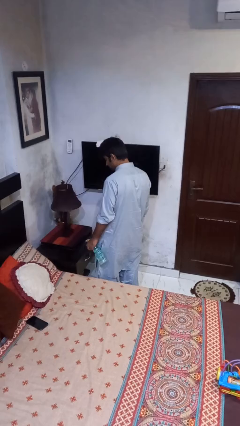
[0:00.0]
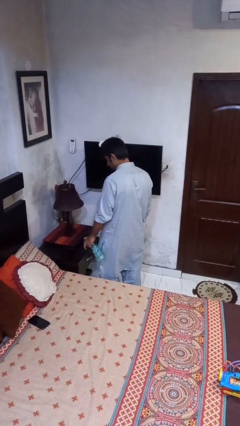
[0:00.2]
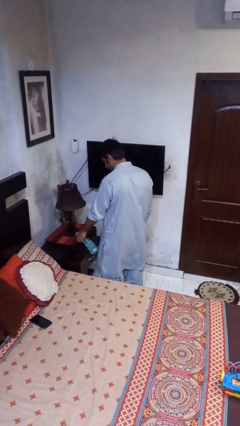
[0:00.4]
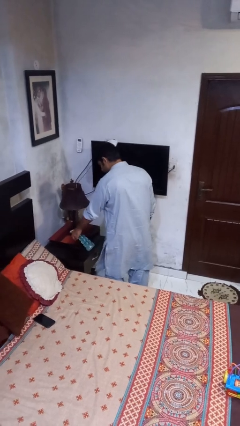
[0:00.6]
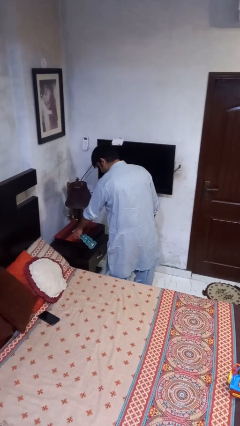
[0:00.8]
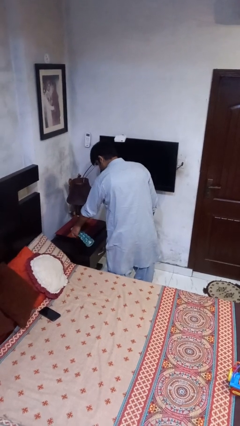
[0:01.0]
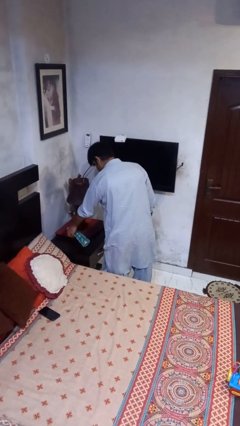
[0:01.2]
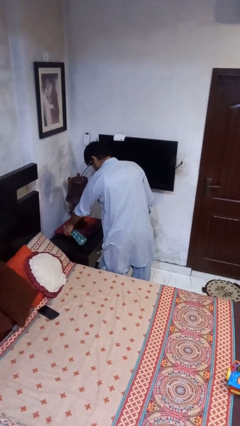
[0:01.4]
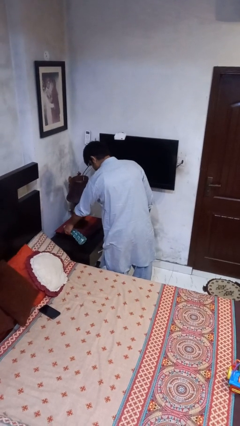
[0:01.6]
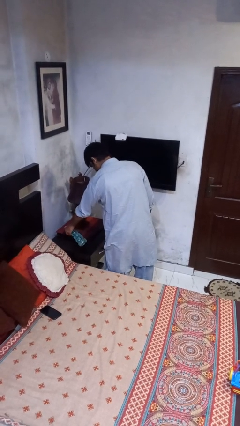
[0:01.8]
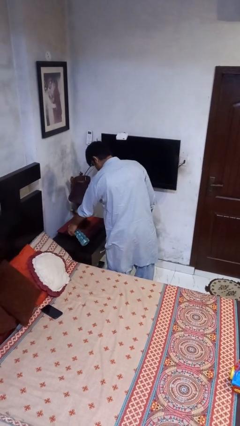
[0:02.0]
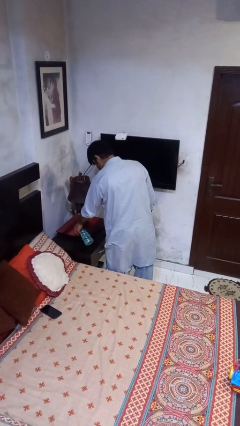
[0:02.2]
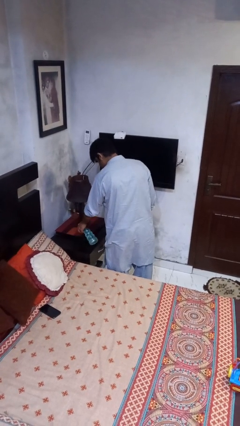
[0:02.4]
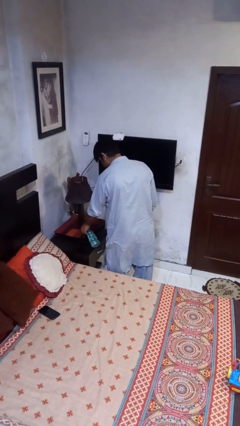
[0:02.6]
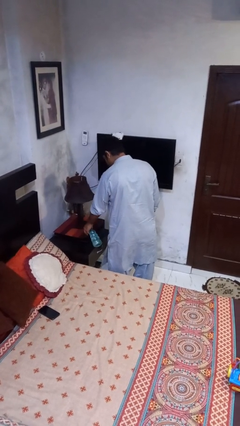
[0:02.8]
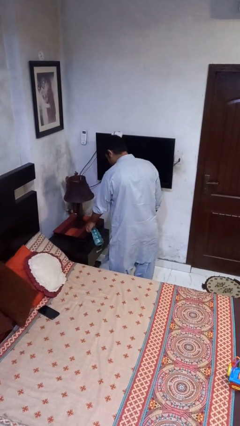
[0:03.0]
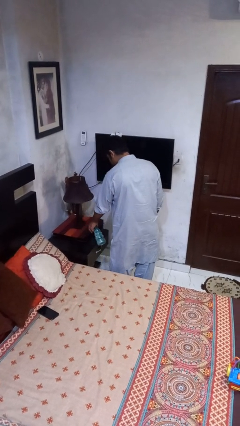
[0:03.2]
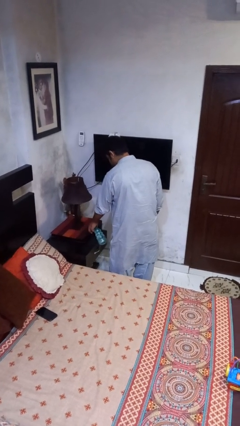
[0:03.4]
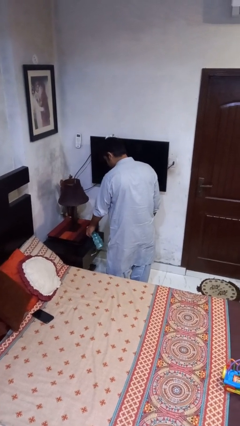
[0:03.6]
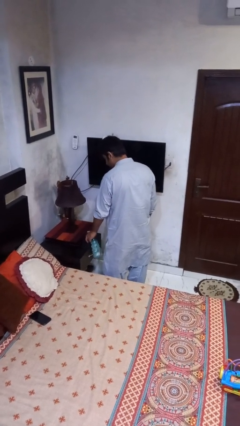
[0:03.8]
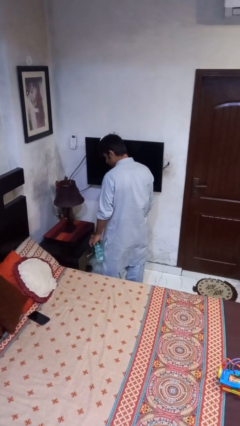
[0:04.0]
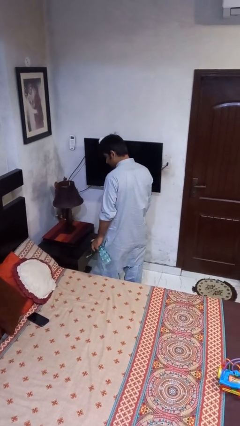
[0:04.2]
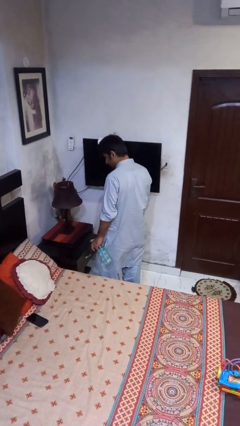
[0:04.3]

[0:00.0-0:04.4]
person sprays from bottle

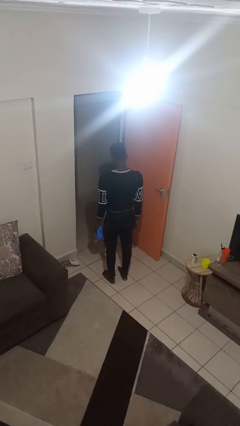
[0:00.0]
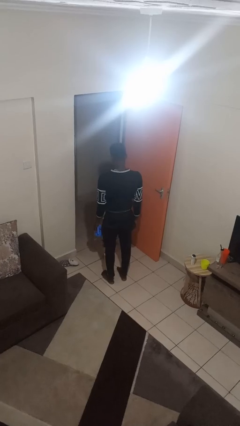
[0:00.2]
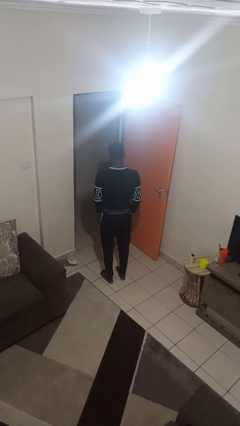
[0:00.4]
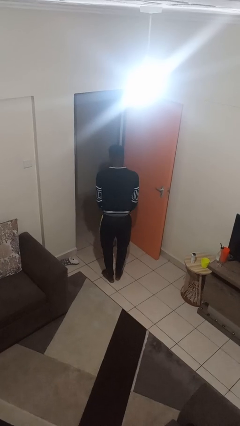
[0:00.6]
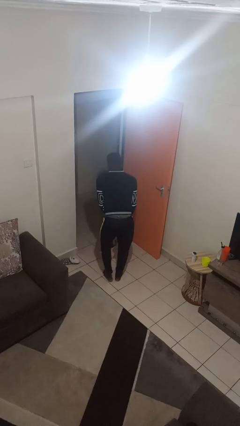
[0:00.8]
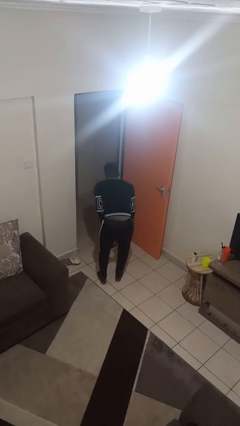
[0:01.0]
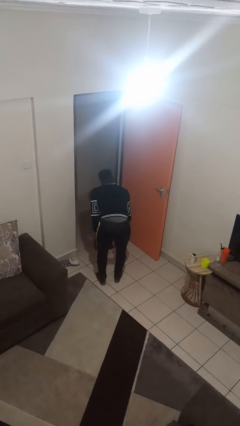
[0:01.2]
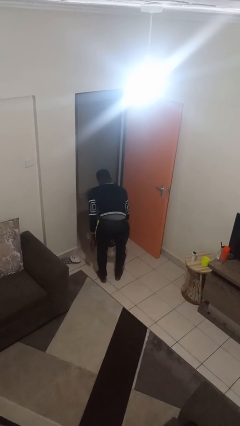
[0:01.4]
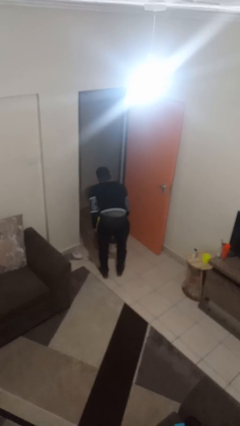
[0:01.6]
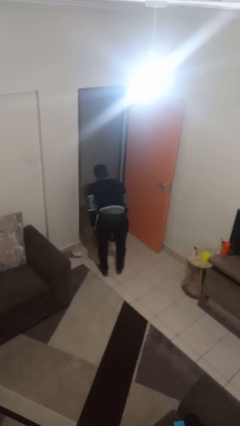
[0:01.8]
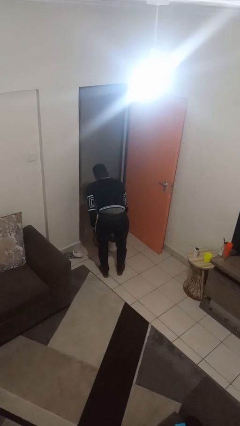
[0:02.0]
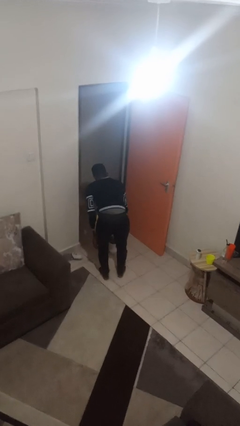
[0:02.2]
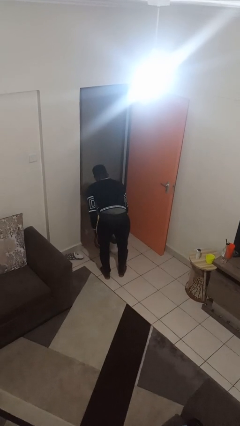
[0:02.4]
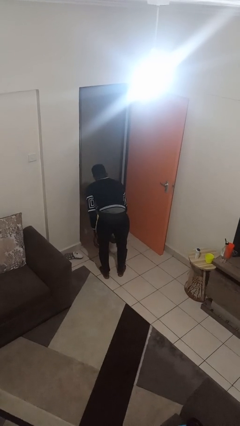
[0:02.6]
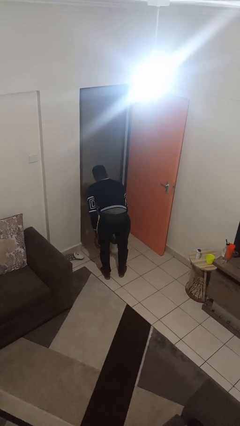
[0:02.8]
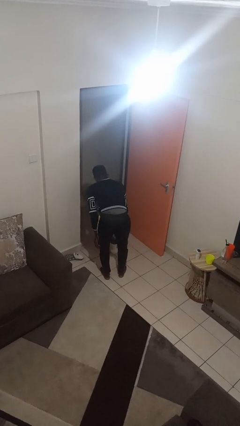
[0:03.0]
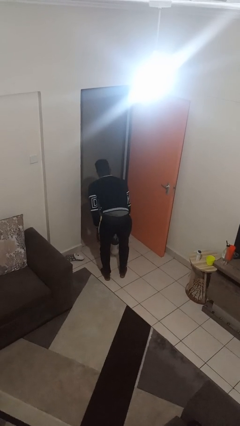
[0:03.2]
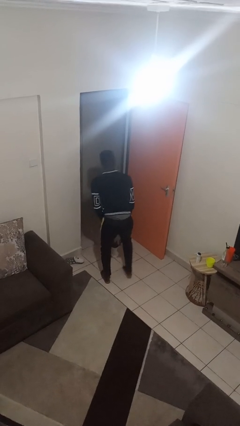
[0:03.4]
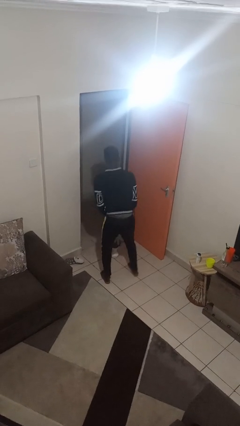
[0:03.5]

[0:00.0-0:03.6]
person waters houseplant

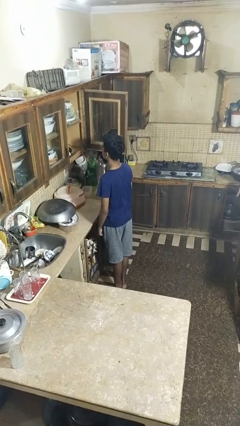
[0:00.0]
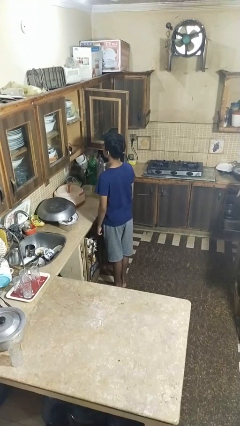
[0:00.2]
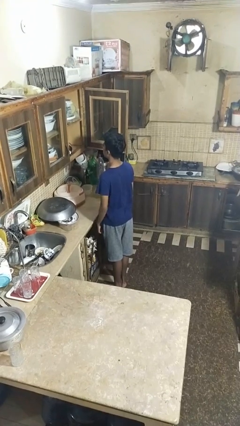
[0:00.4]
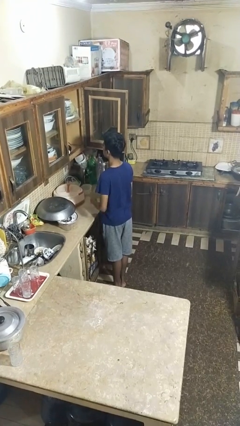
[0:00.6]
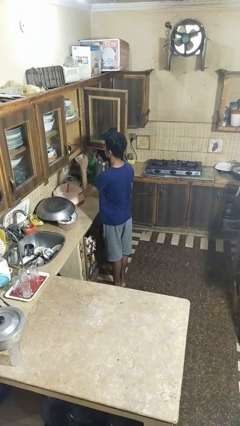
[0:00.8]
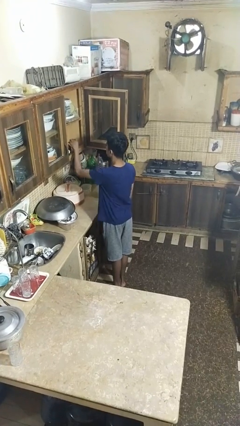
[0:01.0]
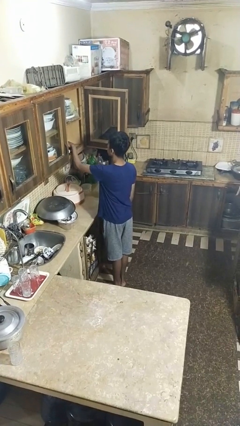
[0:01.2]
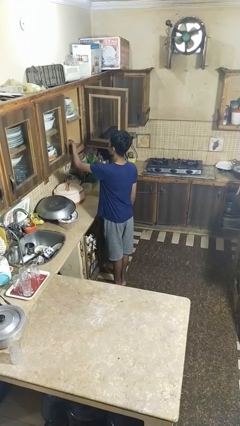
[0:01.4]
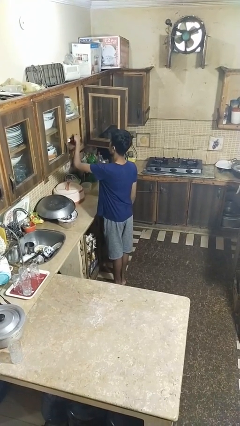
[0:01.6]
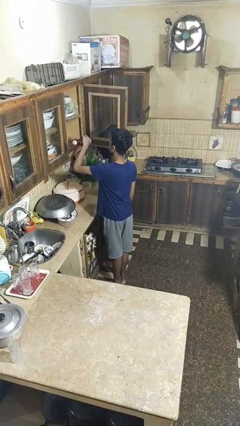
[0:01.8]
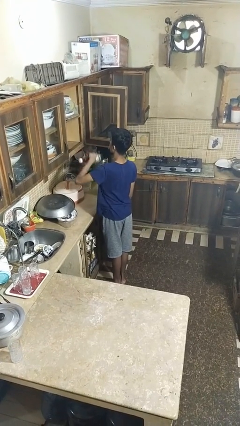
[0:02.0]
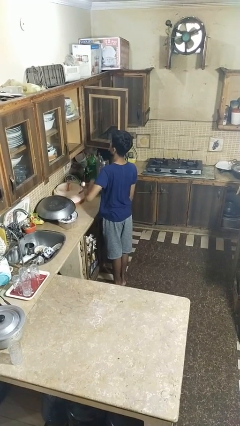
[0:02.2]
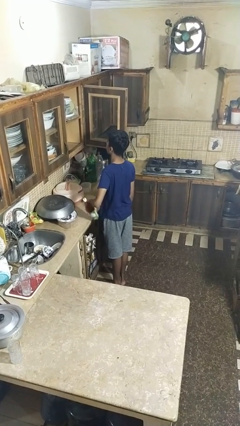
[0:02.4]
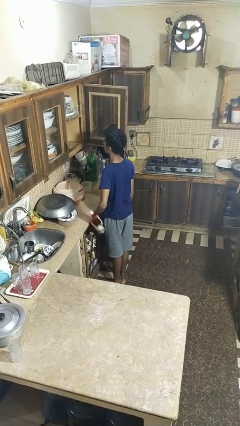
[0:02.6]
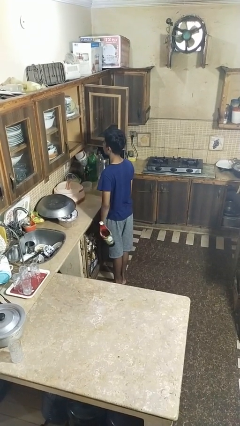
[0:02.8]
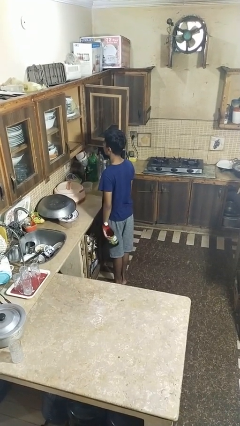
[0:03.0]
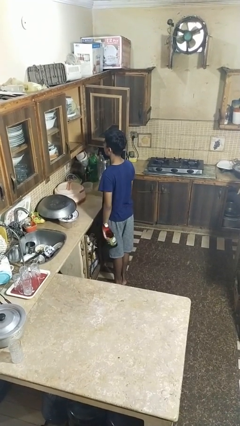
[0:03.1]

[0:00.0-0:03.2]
person takes object from cabinet

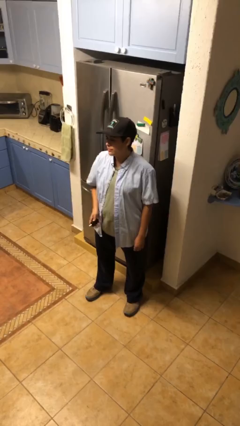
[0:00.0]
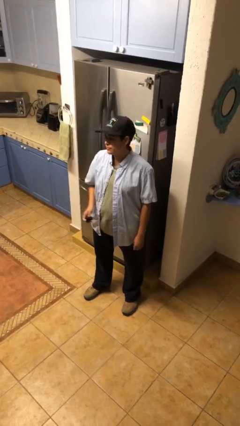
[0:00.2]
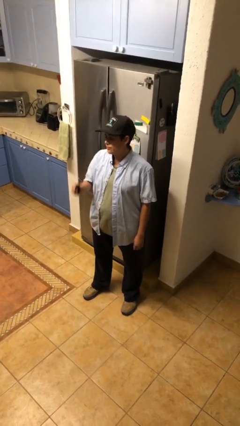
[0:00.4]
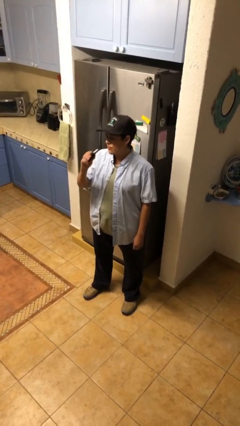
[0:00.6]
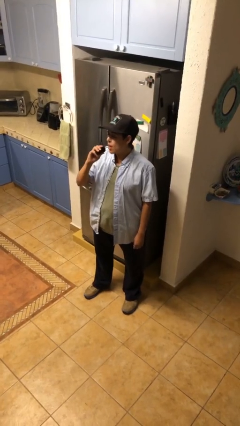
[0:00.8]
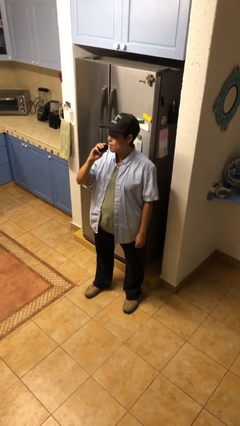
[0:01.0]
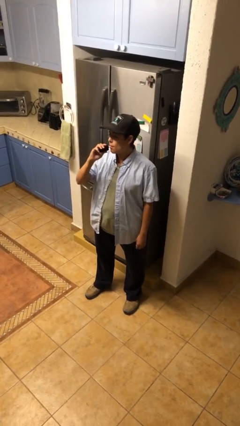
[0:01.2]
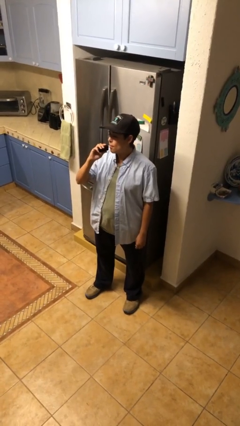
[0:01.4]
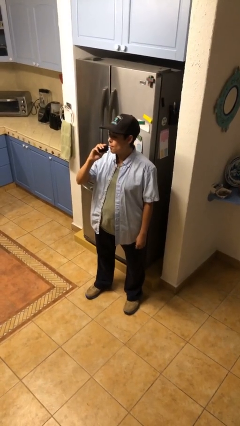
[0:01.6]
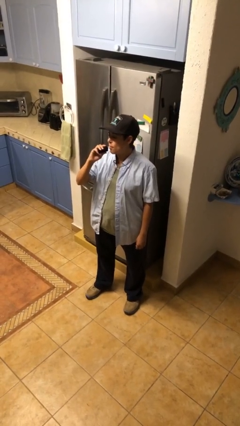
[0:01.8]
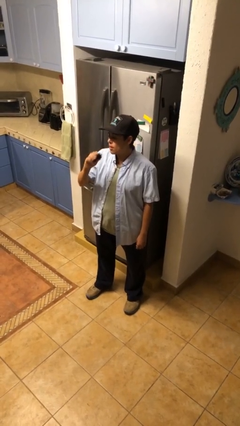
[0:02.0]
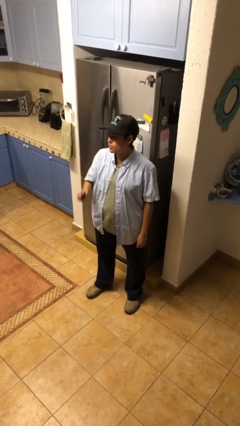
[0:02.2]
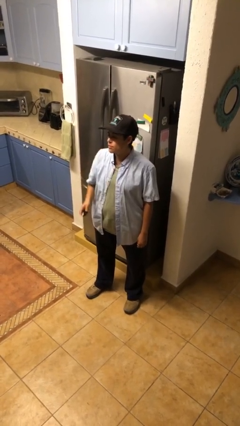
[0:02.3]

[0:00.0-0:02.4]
person vapes

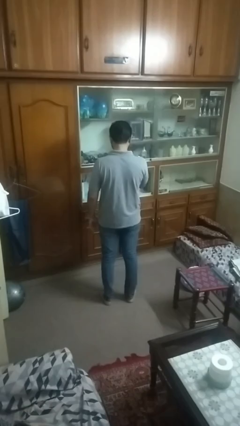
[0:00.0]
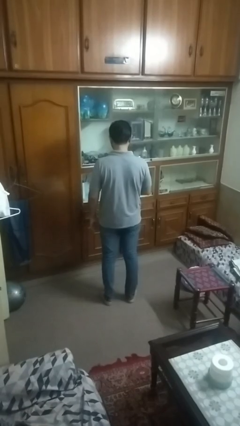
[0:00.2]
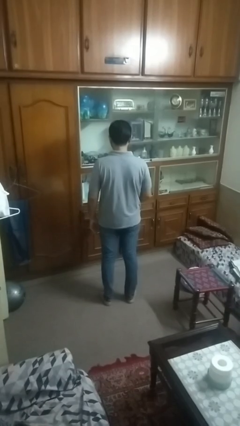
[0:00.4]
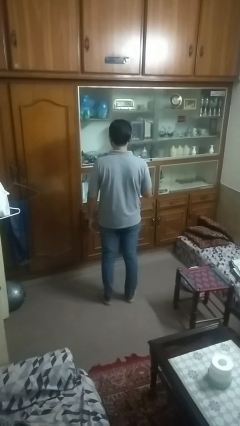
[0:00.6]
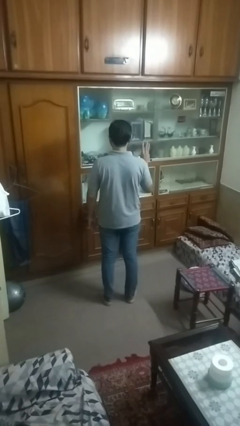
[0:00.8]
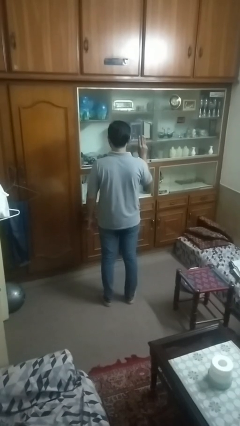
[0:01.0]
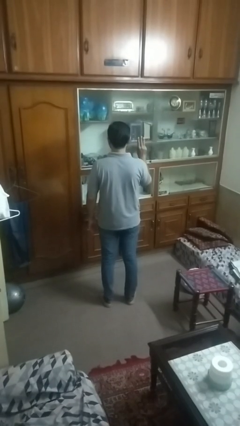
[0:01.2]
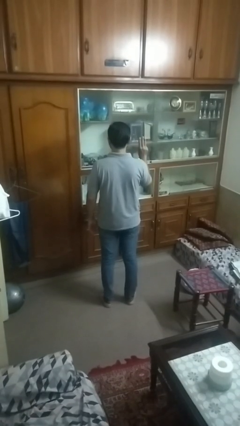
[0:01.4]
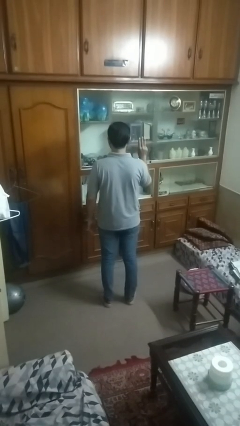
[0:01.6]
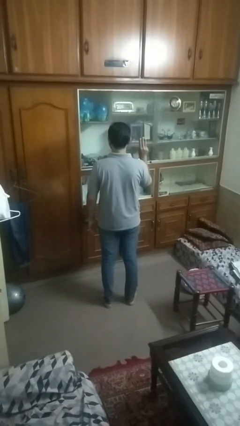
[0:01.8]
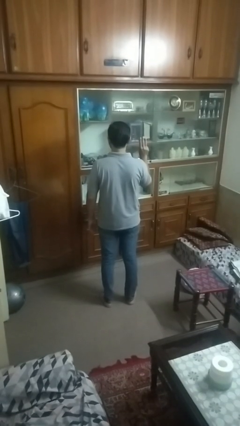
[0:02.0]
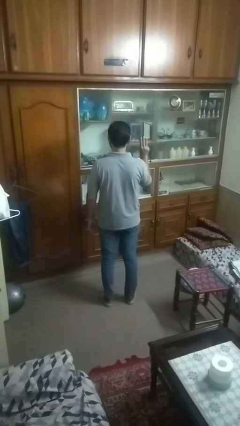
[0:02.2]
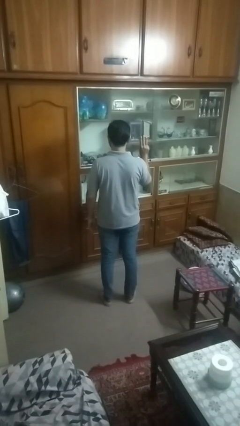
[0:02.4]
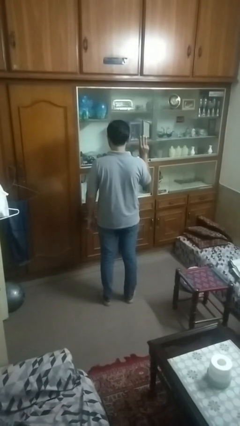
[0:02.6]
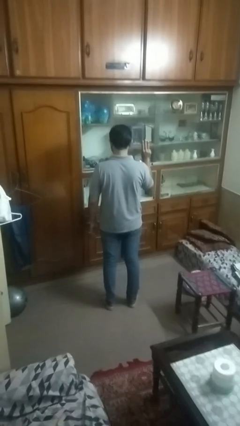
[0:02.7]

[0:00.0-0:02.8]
person gestures number three

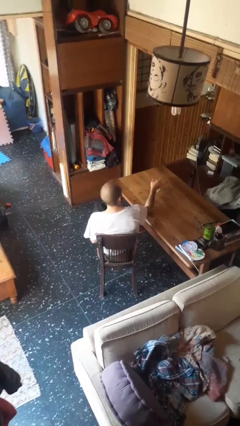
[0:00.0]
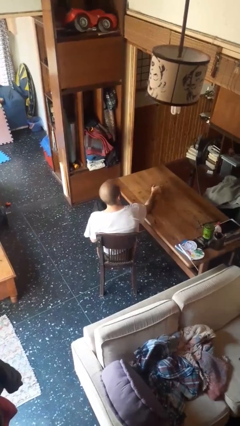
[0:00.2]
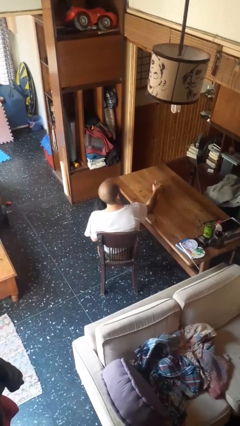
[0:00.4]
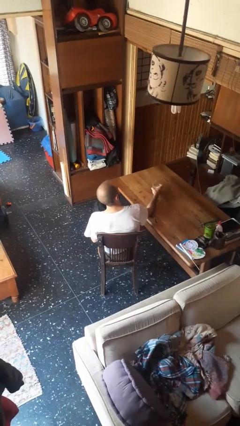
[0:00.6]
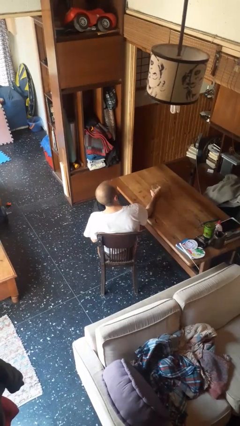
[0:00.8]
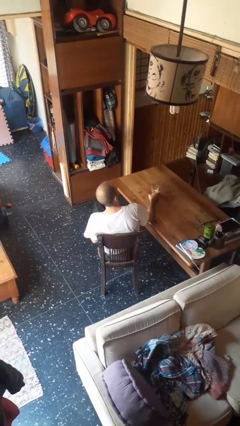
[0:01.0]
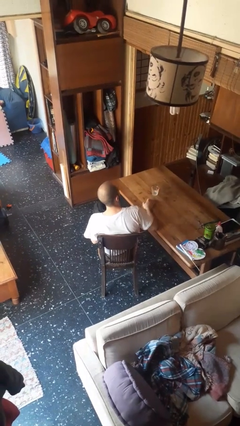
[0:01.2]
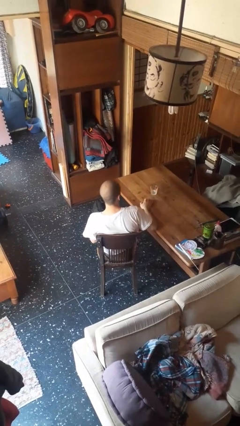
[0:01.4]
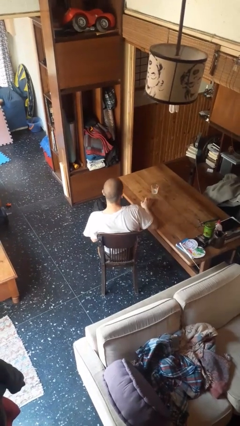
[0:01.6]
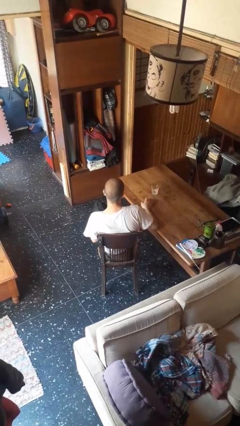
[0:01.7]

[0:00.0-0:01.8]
person sets upright glass
